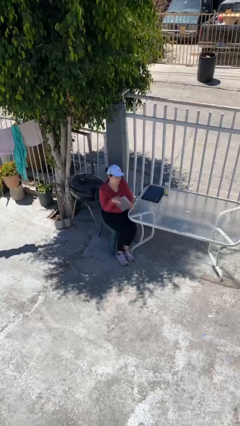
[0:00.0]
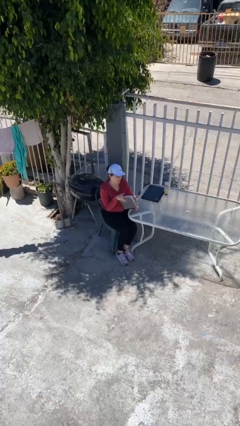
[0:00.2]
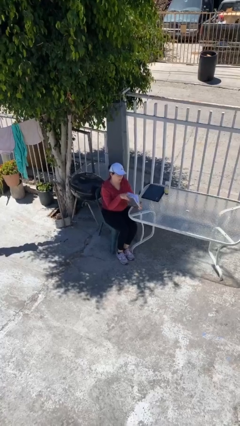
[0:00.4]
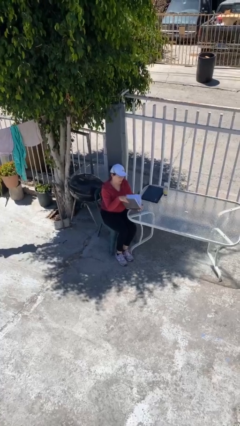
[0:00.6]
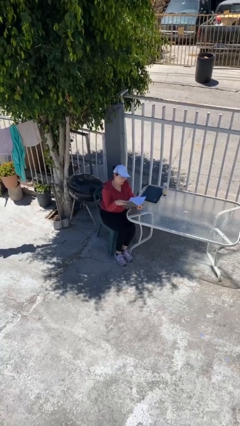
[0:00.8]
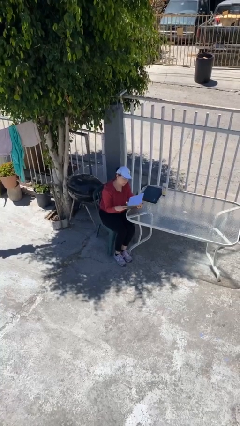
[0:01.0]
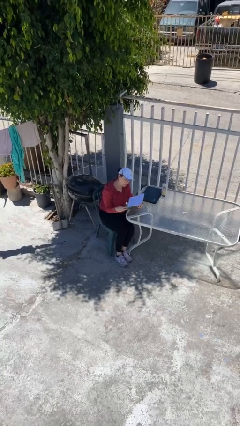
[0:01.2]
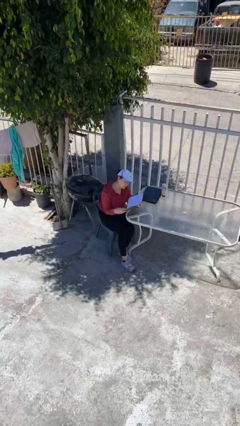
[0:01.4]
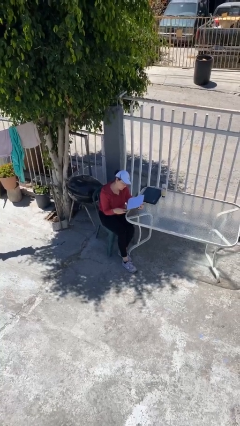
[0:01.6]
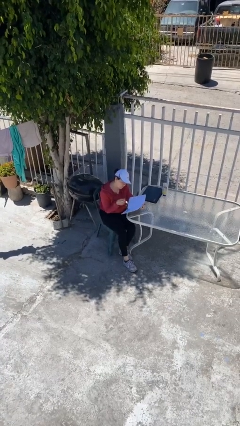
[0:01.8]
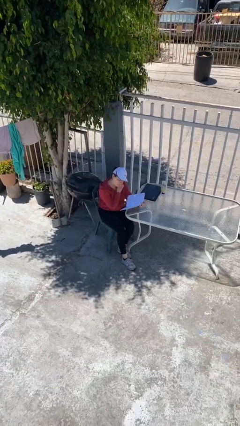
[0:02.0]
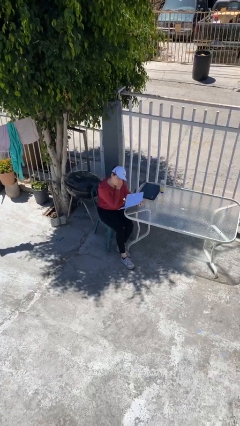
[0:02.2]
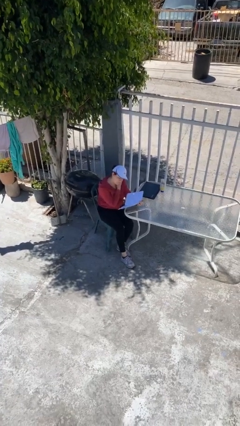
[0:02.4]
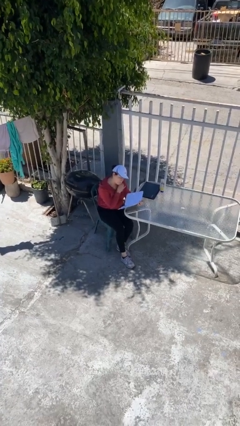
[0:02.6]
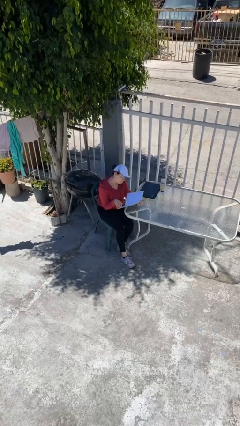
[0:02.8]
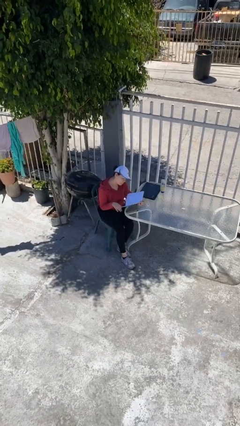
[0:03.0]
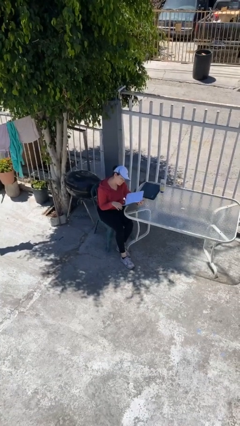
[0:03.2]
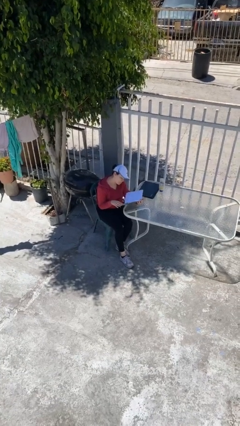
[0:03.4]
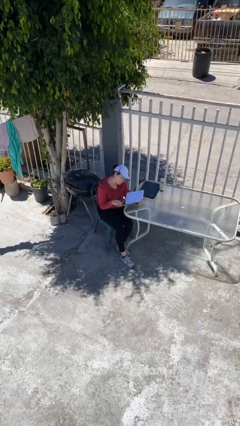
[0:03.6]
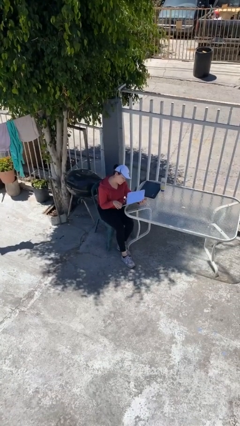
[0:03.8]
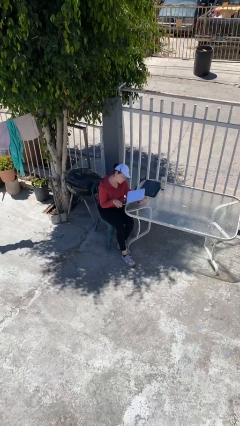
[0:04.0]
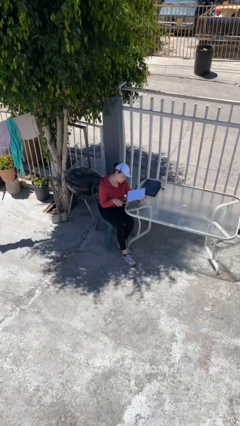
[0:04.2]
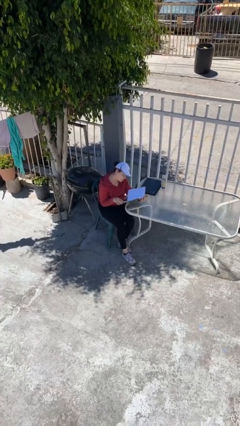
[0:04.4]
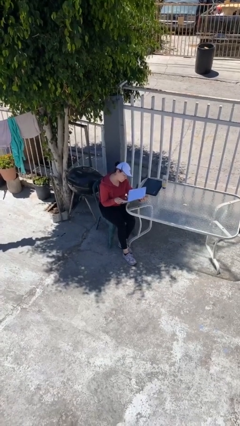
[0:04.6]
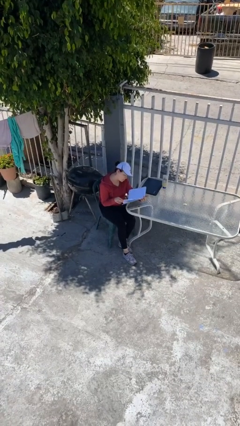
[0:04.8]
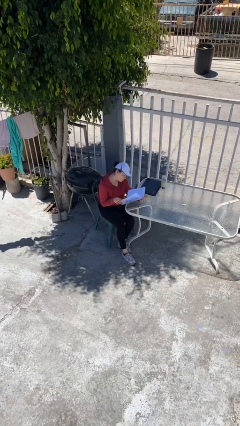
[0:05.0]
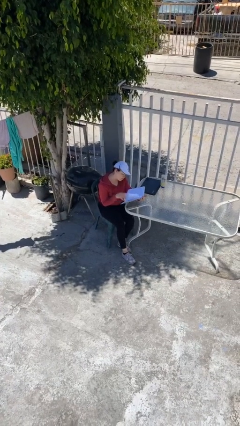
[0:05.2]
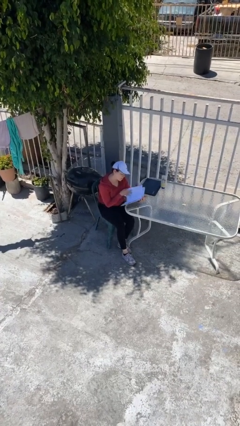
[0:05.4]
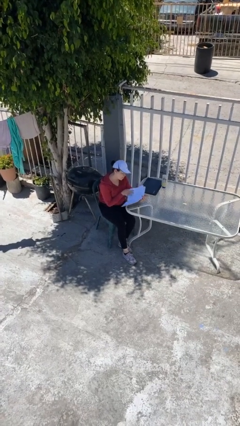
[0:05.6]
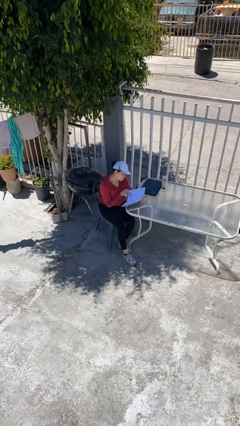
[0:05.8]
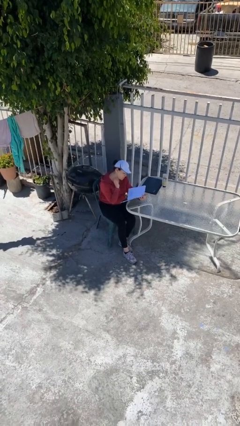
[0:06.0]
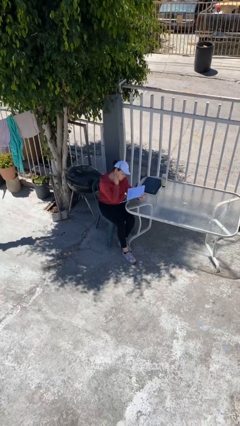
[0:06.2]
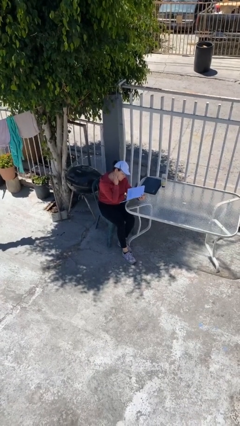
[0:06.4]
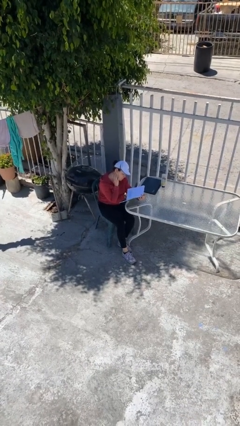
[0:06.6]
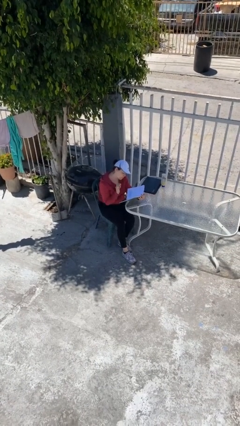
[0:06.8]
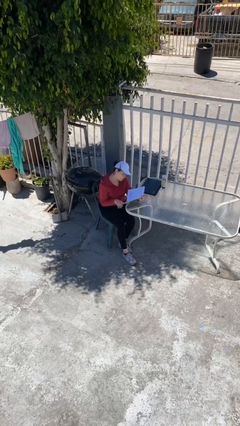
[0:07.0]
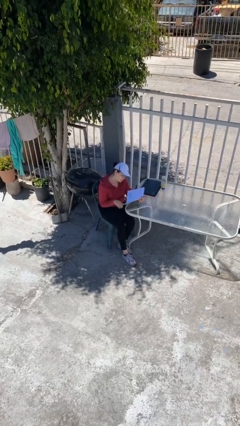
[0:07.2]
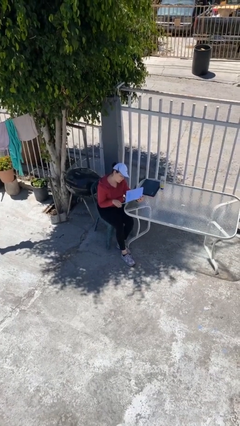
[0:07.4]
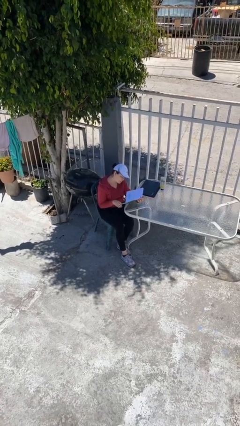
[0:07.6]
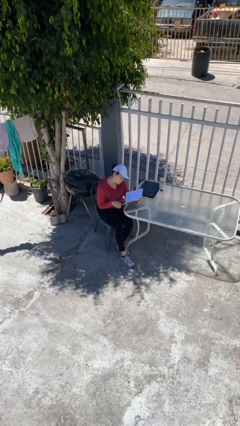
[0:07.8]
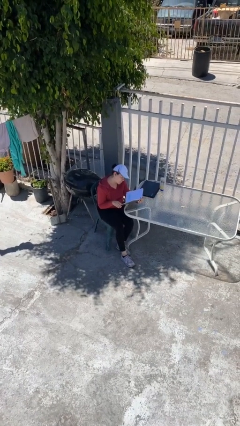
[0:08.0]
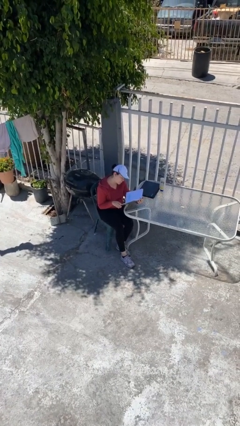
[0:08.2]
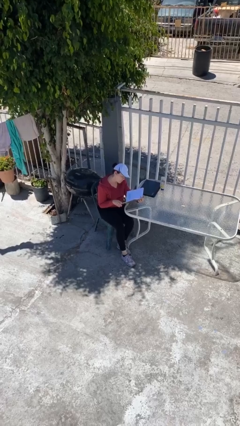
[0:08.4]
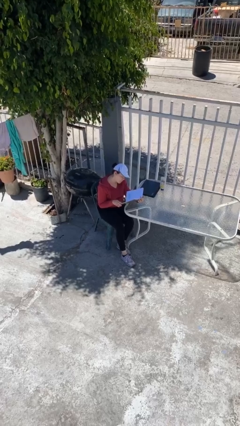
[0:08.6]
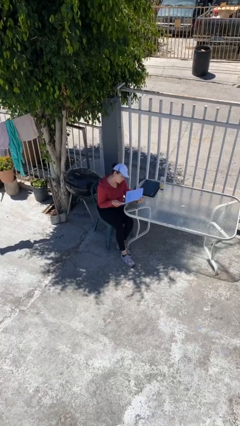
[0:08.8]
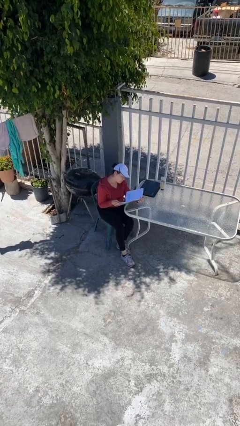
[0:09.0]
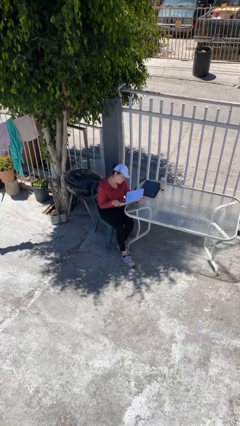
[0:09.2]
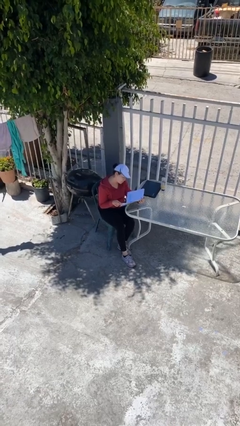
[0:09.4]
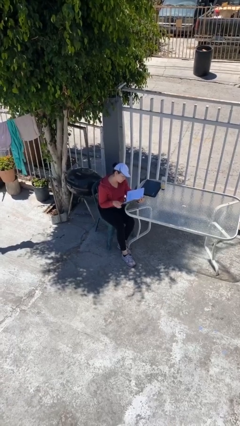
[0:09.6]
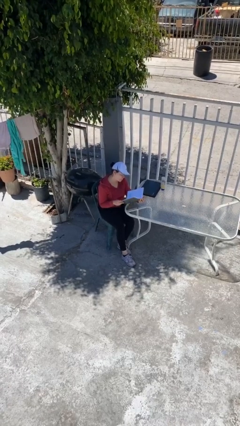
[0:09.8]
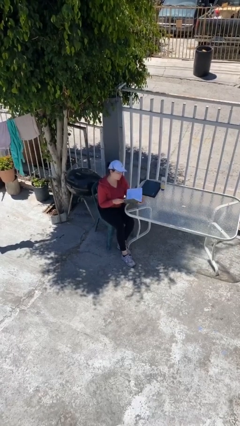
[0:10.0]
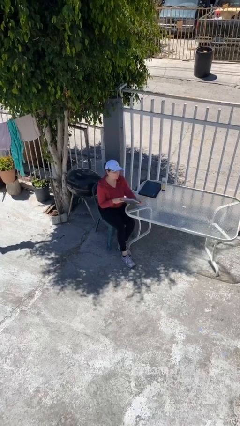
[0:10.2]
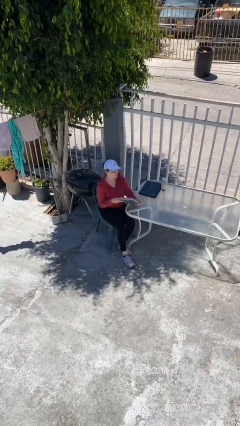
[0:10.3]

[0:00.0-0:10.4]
person reads document

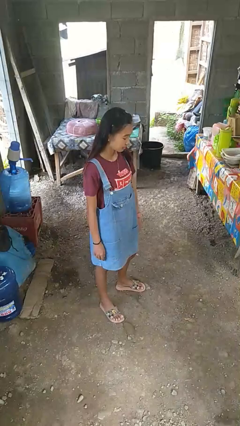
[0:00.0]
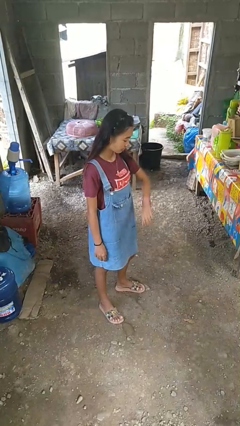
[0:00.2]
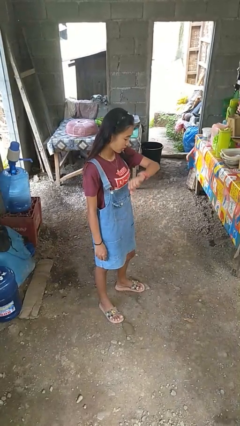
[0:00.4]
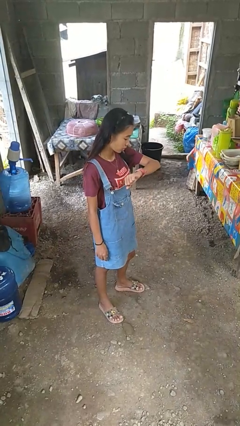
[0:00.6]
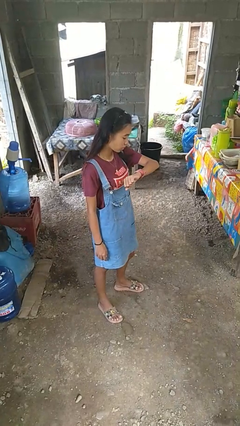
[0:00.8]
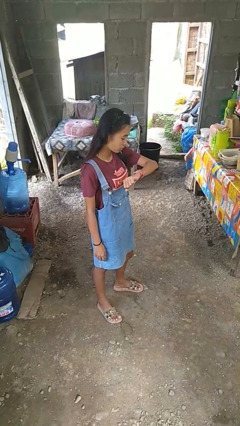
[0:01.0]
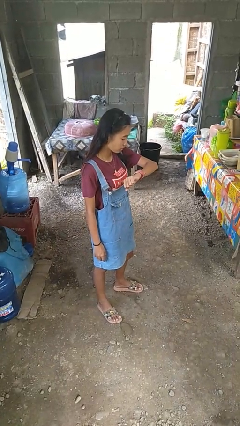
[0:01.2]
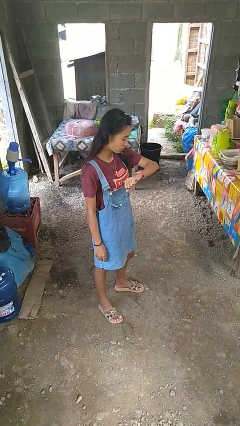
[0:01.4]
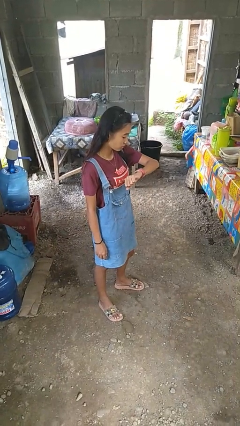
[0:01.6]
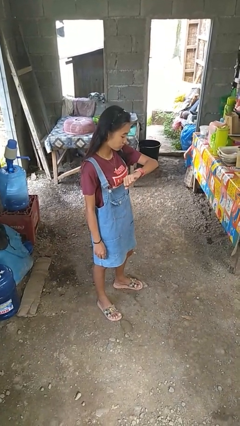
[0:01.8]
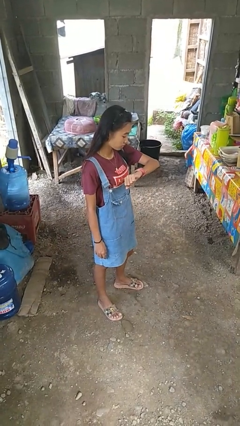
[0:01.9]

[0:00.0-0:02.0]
person looks at wristwatch

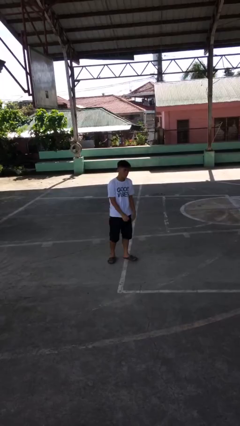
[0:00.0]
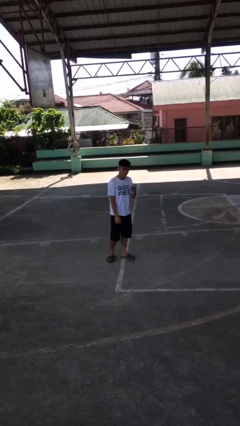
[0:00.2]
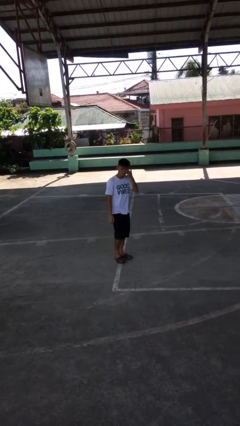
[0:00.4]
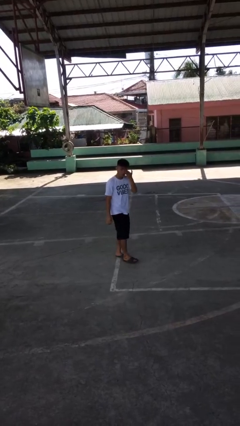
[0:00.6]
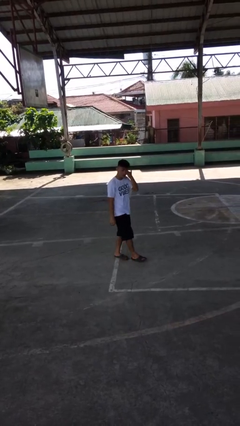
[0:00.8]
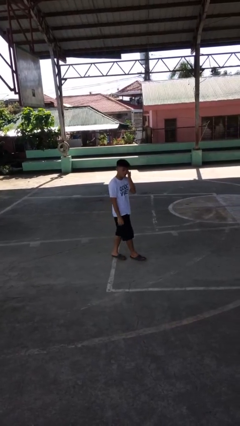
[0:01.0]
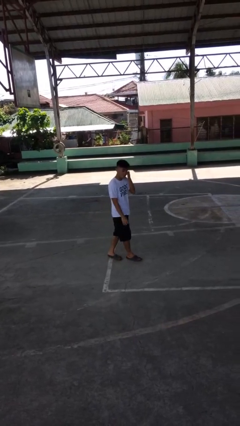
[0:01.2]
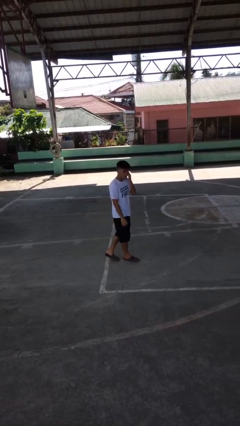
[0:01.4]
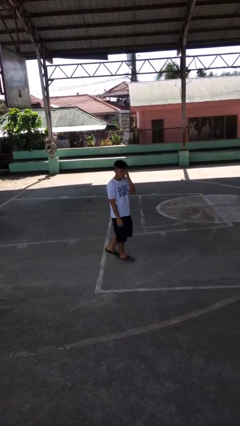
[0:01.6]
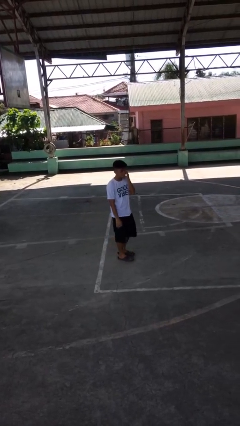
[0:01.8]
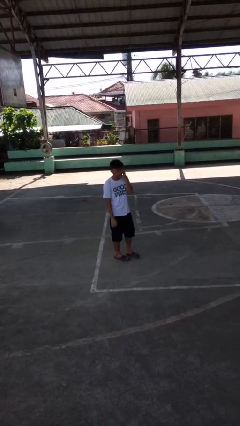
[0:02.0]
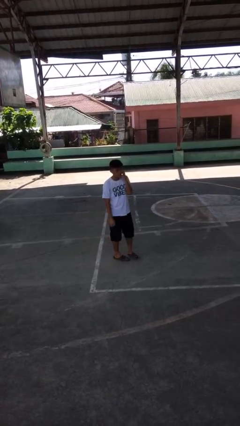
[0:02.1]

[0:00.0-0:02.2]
person rubs eyes

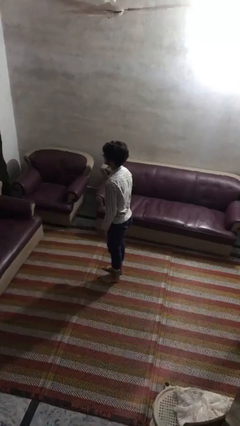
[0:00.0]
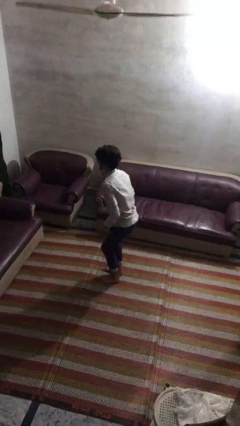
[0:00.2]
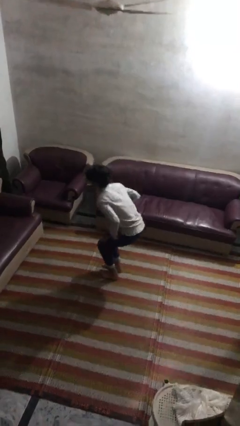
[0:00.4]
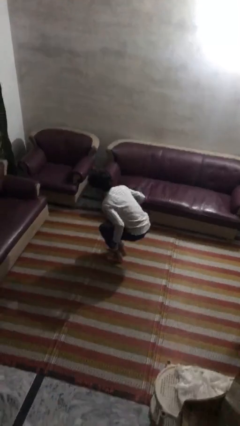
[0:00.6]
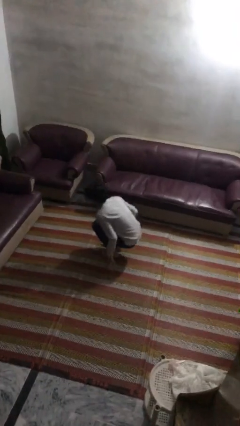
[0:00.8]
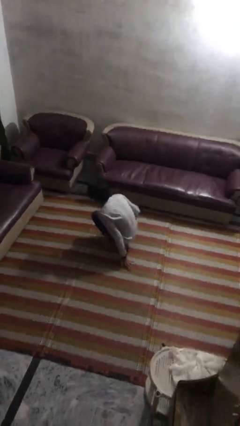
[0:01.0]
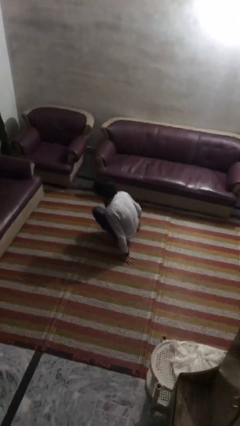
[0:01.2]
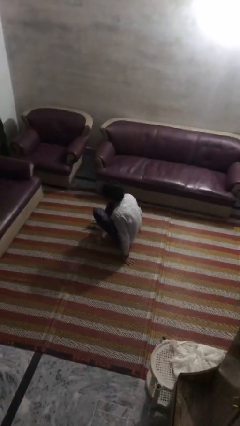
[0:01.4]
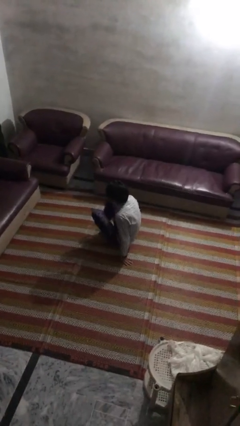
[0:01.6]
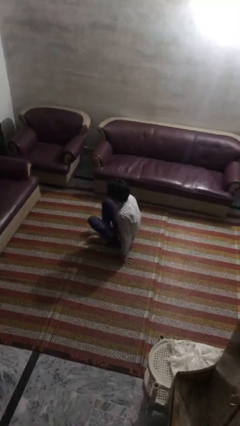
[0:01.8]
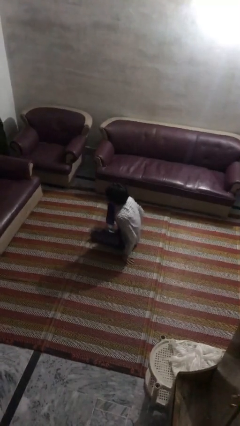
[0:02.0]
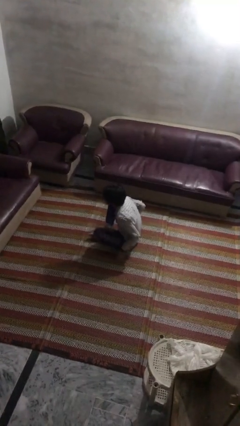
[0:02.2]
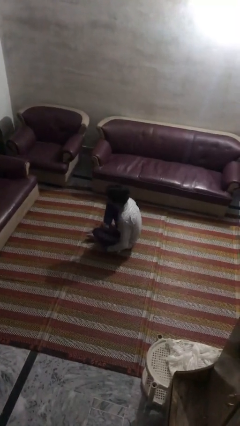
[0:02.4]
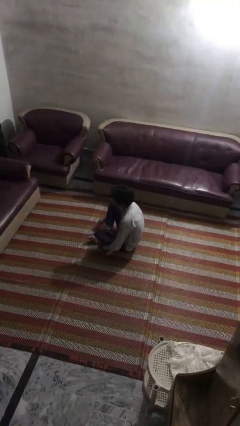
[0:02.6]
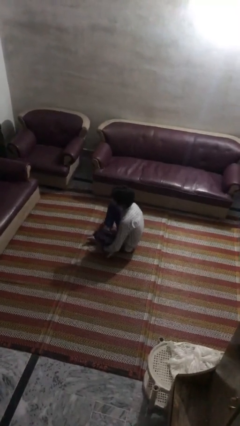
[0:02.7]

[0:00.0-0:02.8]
person sits crisscross

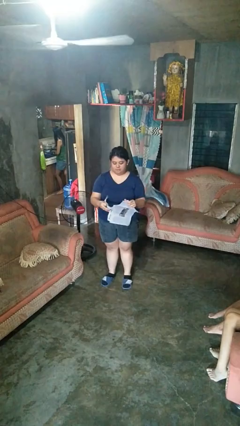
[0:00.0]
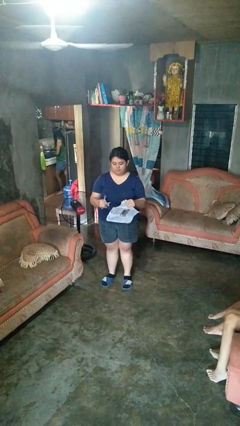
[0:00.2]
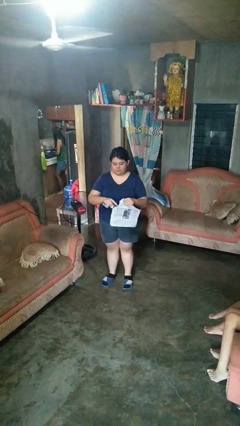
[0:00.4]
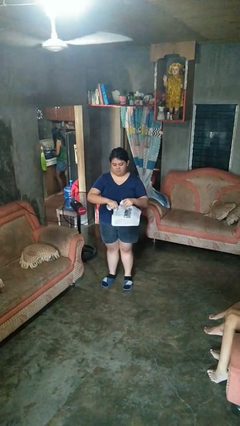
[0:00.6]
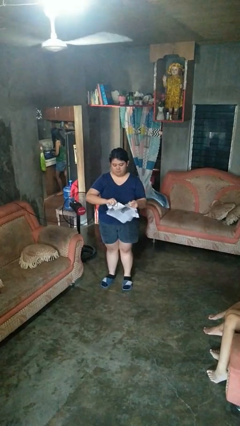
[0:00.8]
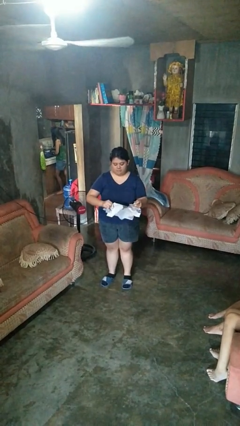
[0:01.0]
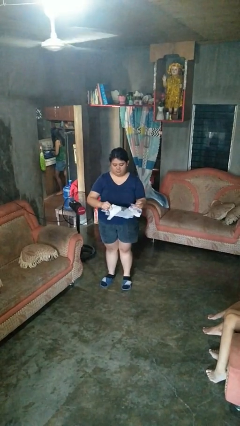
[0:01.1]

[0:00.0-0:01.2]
person tears paper
